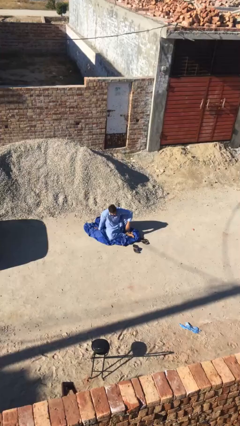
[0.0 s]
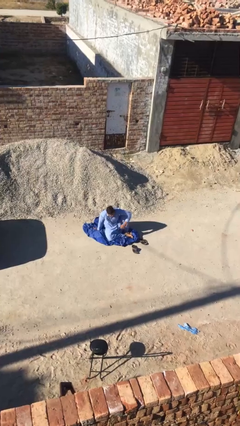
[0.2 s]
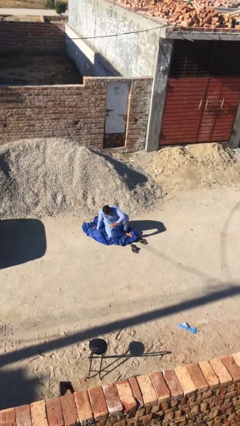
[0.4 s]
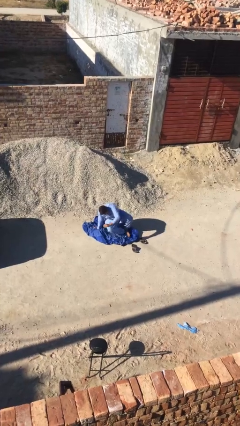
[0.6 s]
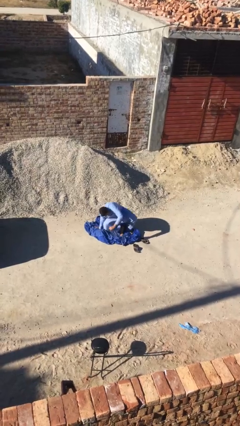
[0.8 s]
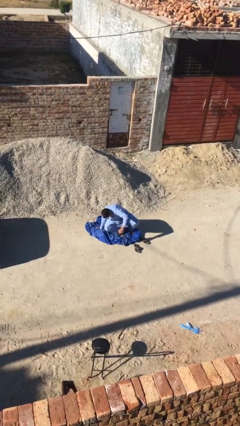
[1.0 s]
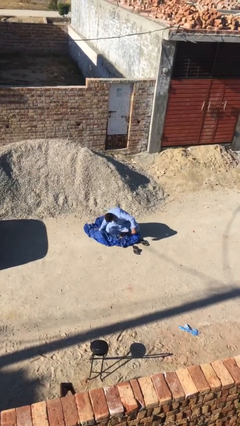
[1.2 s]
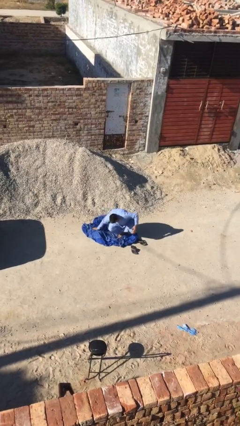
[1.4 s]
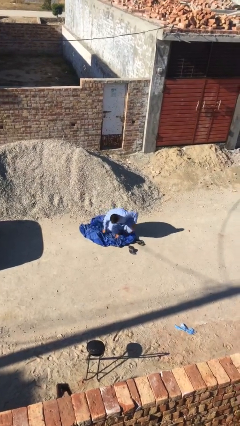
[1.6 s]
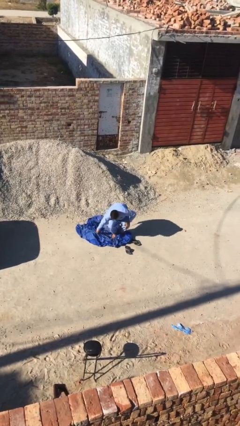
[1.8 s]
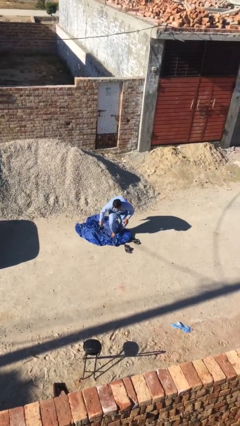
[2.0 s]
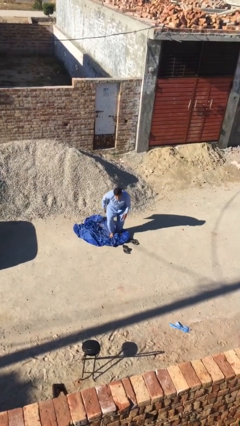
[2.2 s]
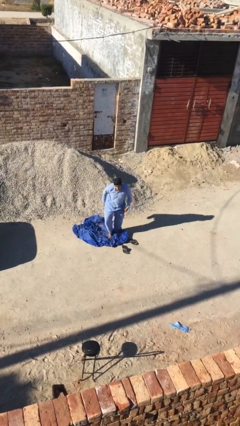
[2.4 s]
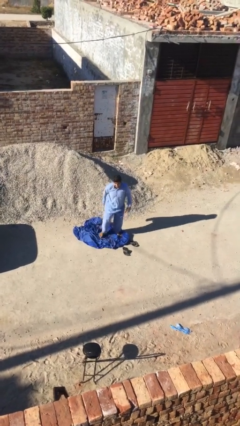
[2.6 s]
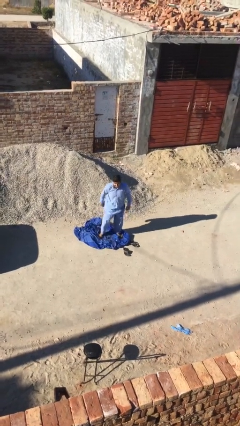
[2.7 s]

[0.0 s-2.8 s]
person stands up

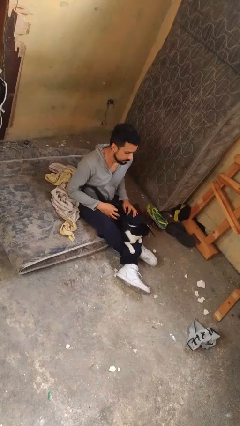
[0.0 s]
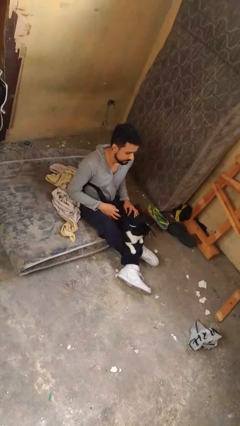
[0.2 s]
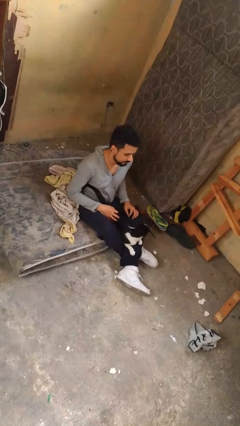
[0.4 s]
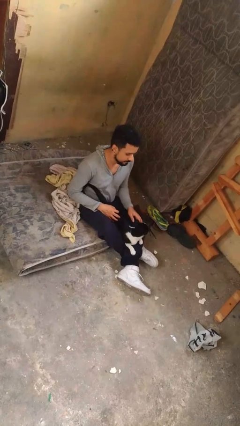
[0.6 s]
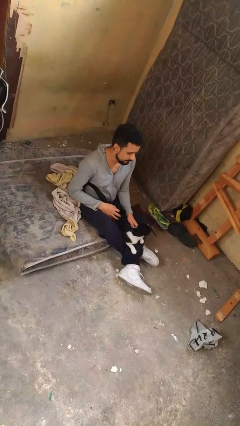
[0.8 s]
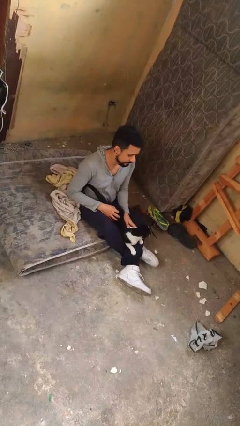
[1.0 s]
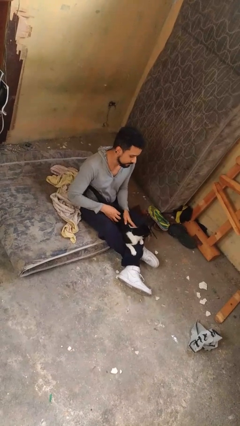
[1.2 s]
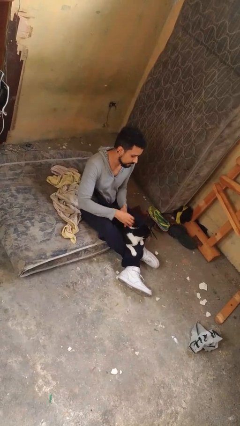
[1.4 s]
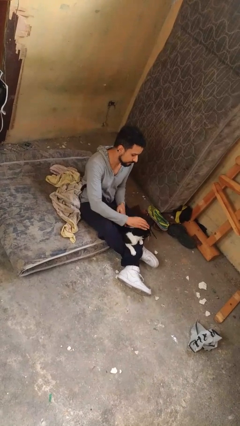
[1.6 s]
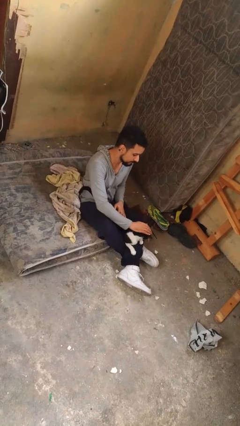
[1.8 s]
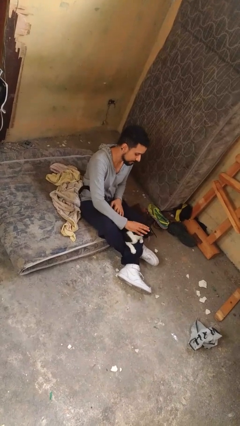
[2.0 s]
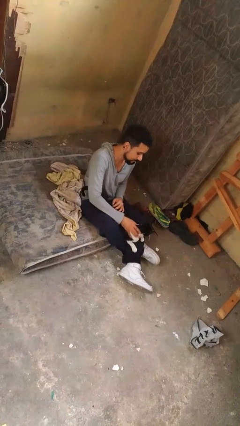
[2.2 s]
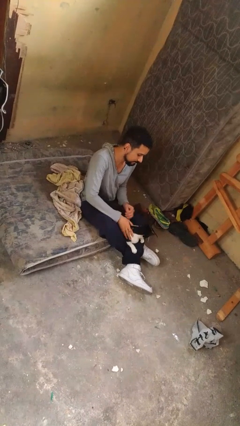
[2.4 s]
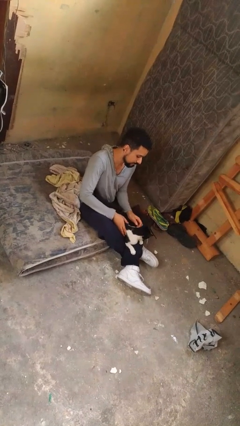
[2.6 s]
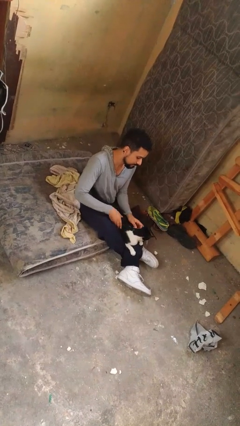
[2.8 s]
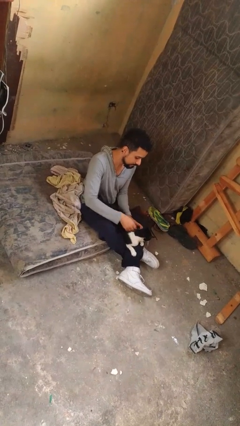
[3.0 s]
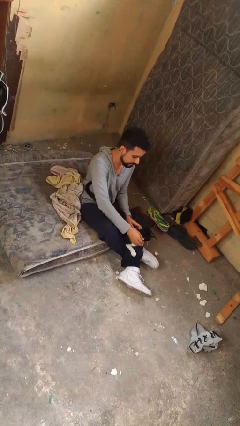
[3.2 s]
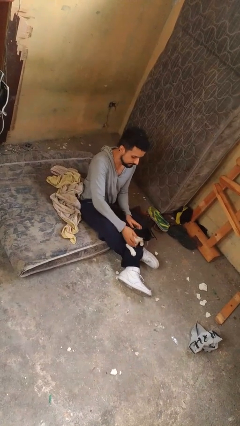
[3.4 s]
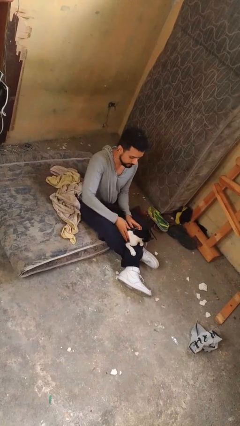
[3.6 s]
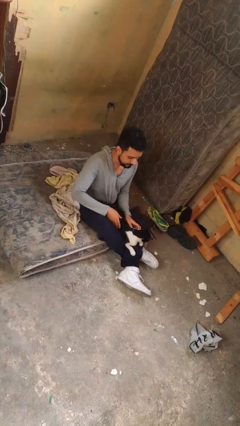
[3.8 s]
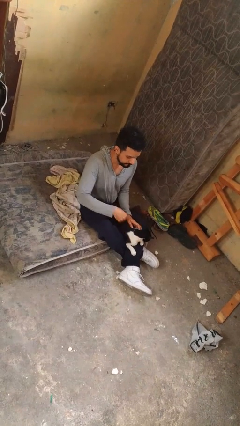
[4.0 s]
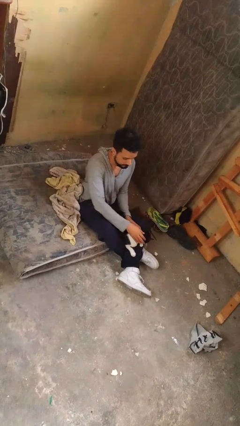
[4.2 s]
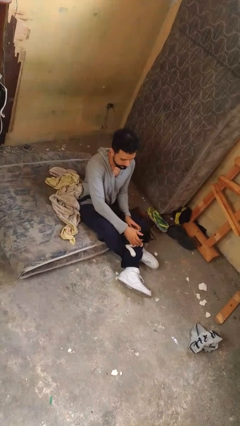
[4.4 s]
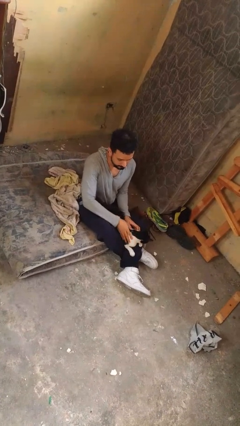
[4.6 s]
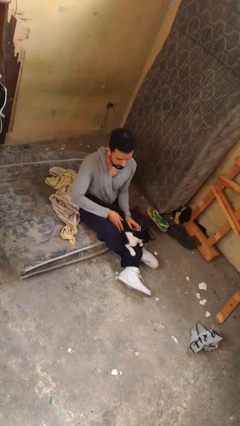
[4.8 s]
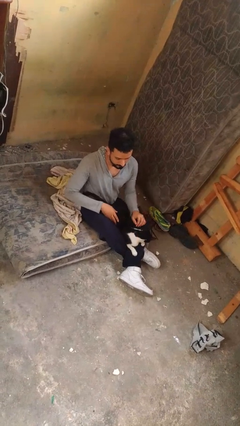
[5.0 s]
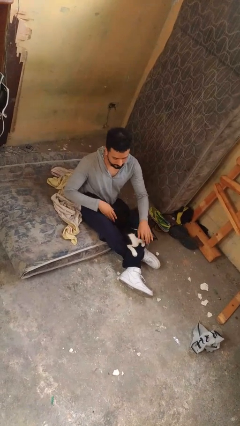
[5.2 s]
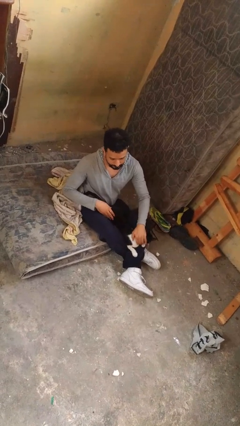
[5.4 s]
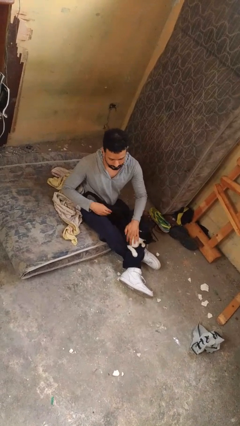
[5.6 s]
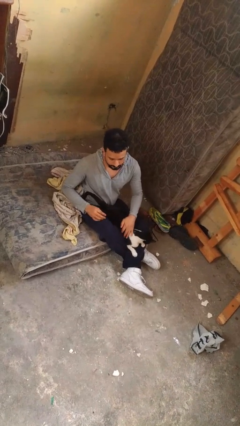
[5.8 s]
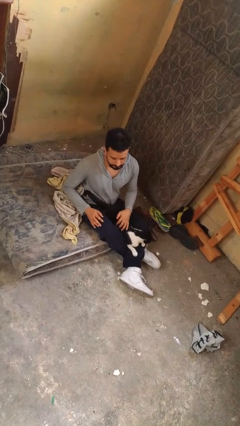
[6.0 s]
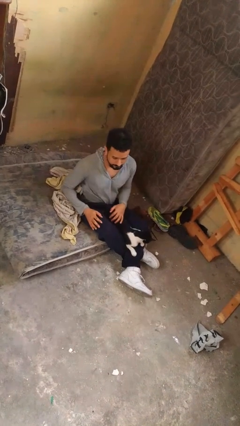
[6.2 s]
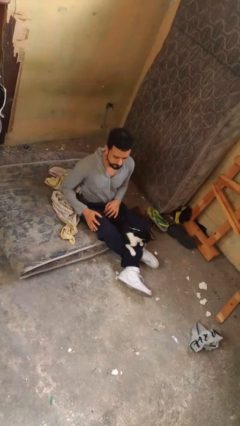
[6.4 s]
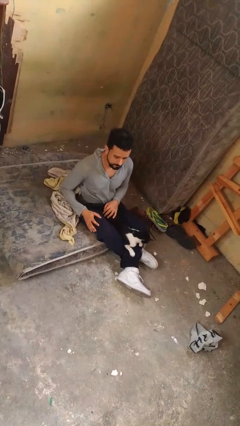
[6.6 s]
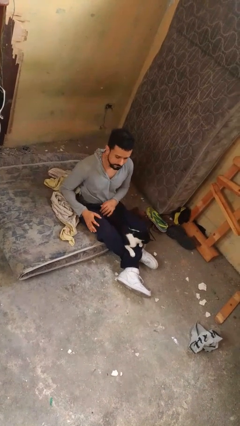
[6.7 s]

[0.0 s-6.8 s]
person pets cat

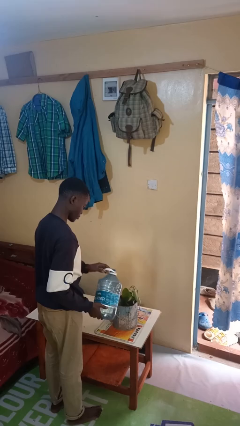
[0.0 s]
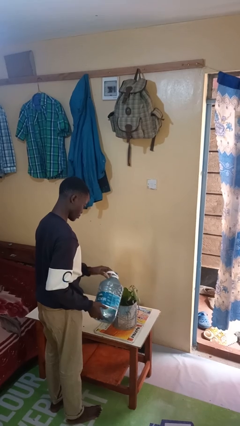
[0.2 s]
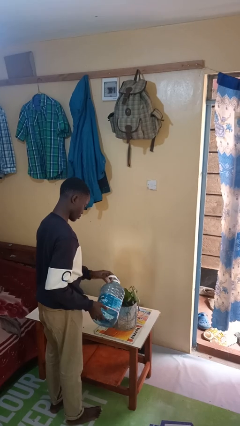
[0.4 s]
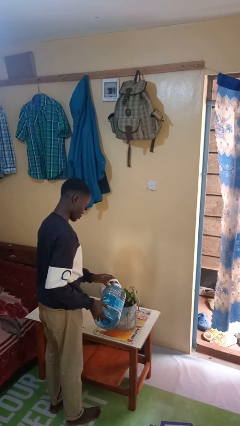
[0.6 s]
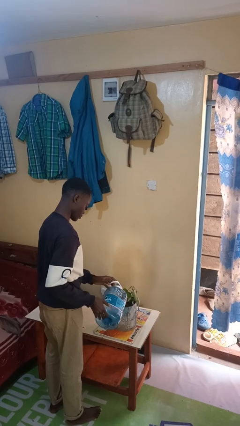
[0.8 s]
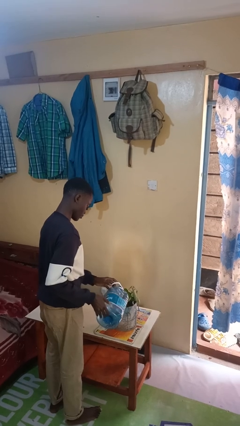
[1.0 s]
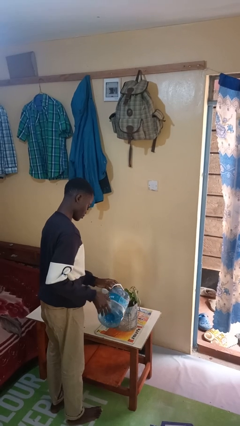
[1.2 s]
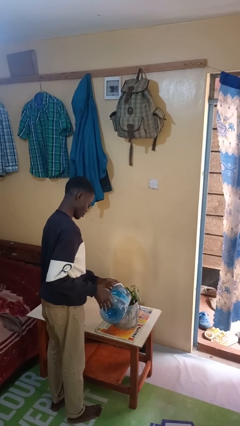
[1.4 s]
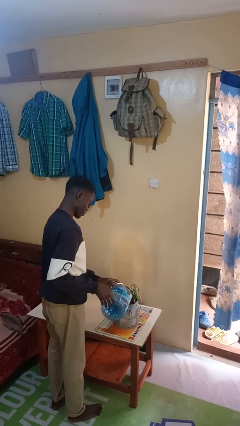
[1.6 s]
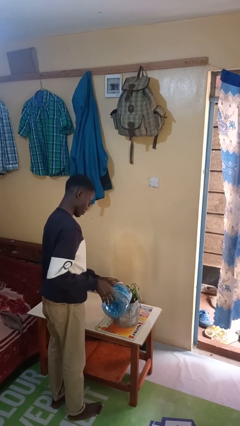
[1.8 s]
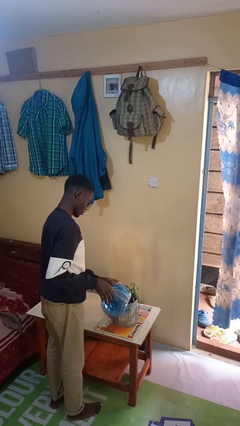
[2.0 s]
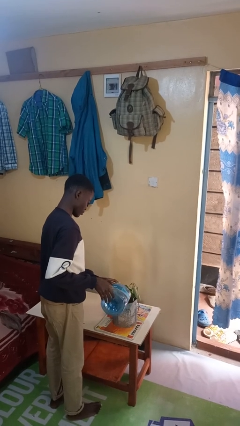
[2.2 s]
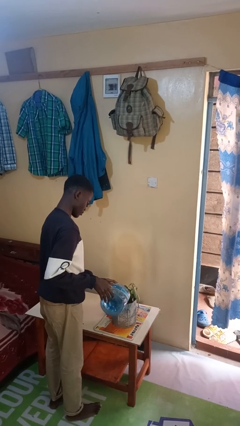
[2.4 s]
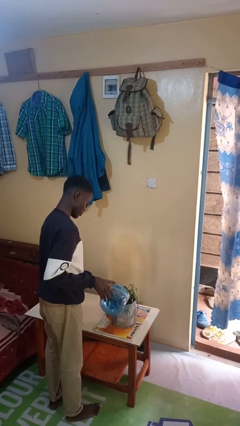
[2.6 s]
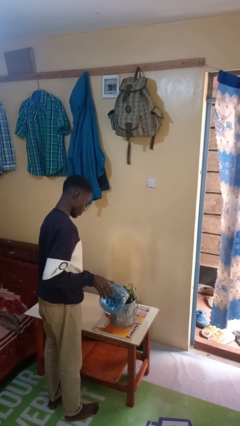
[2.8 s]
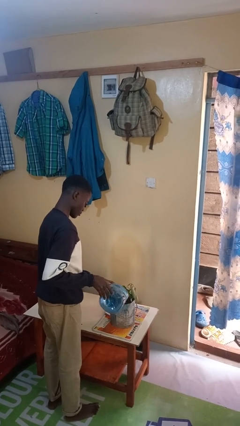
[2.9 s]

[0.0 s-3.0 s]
person waters houseplant

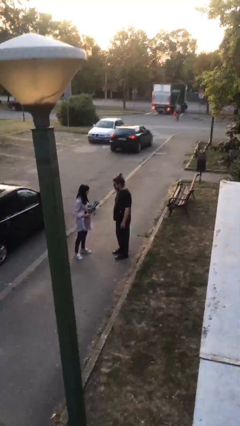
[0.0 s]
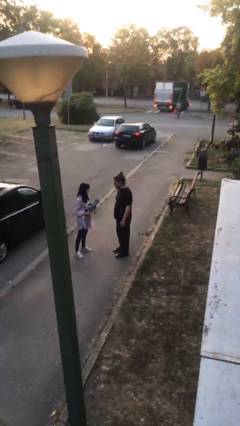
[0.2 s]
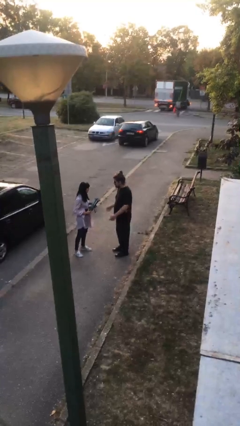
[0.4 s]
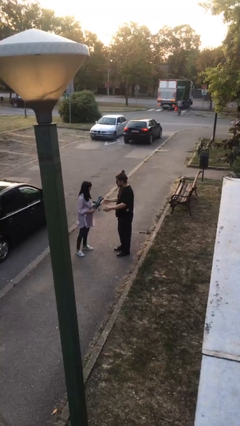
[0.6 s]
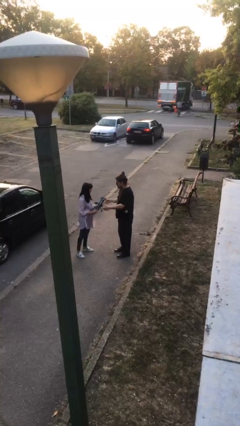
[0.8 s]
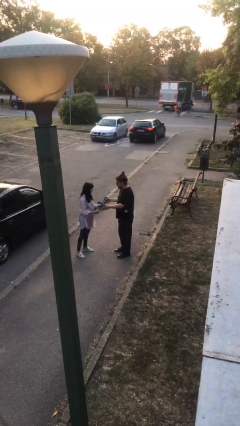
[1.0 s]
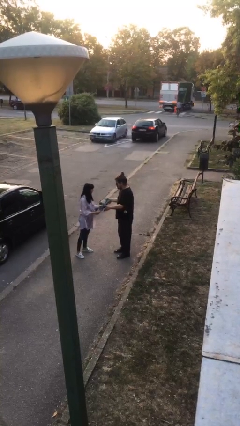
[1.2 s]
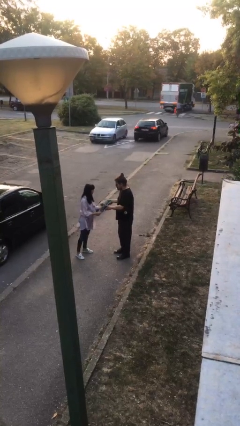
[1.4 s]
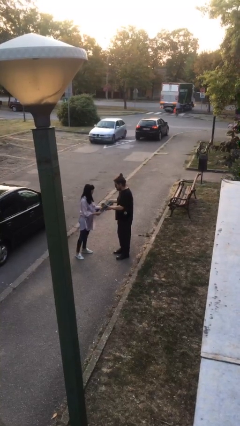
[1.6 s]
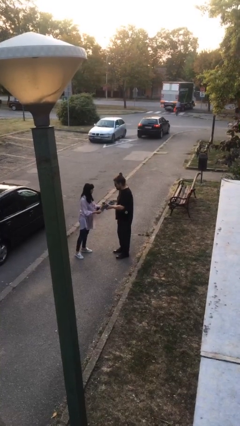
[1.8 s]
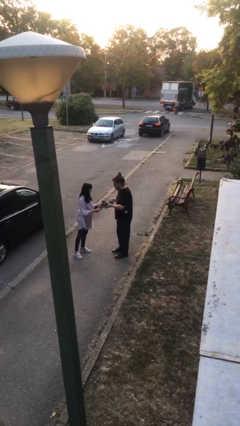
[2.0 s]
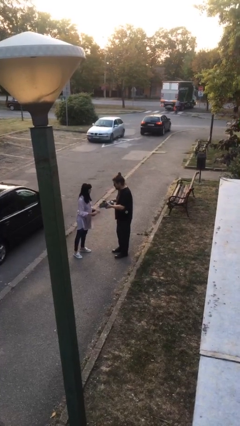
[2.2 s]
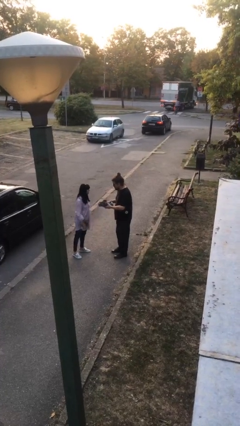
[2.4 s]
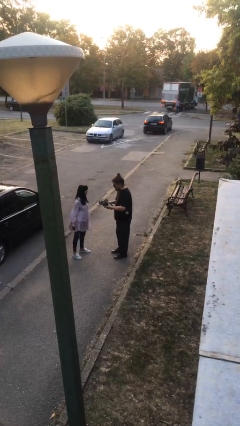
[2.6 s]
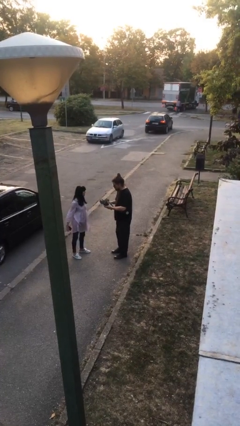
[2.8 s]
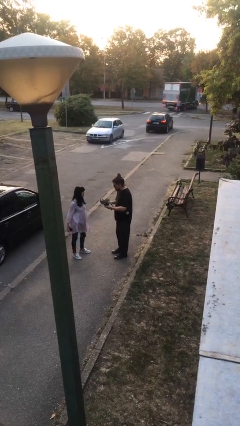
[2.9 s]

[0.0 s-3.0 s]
person transfers object to person

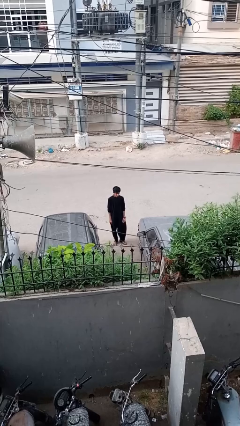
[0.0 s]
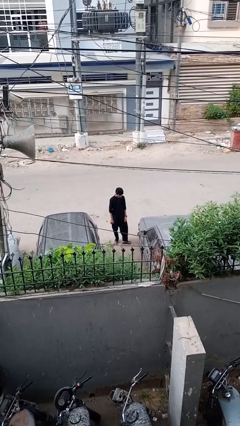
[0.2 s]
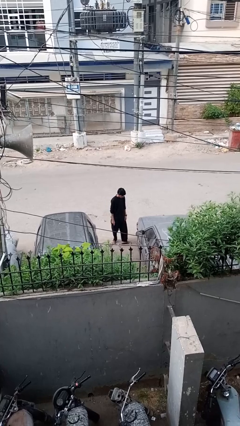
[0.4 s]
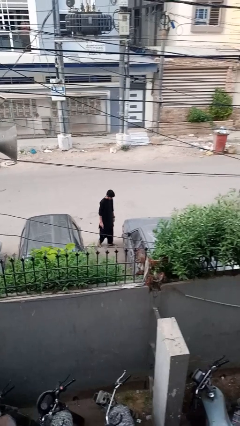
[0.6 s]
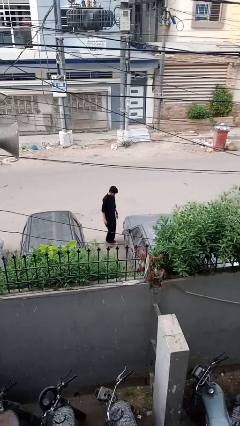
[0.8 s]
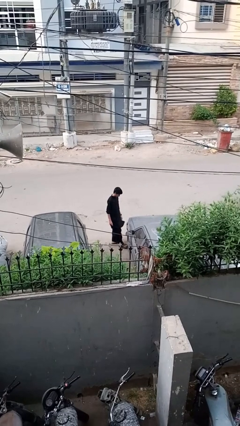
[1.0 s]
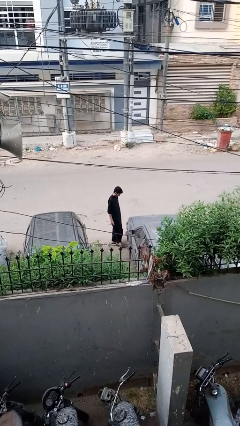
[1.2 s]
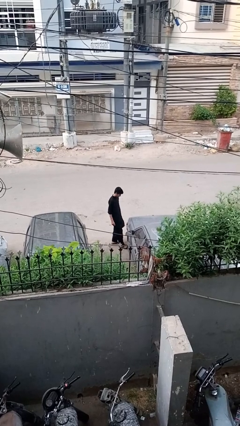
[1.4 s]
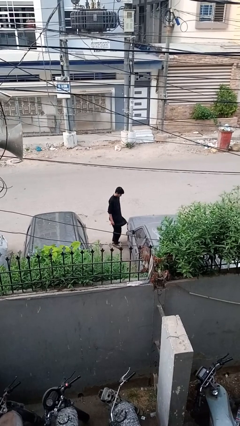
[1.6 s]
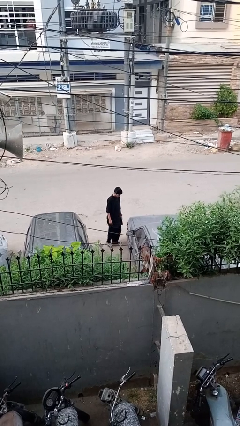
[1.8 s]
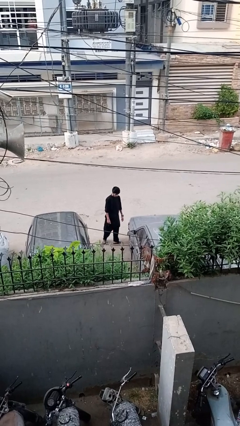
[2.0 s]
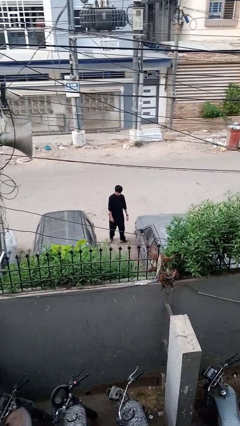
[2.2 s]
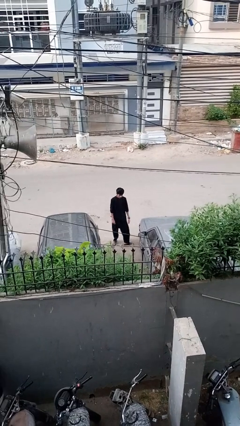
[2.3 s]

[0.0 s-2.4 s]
person kicks car tires
